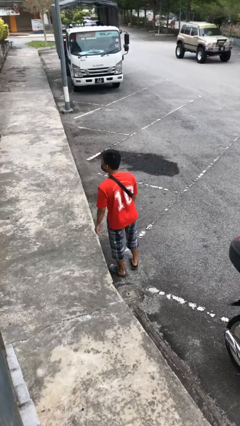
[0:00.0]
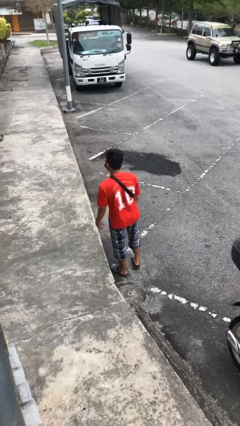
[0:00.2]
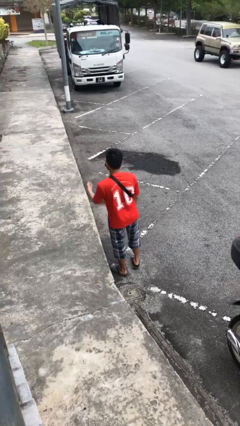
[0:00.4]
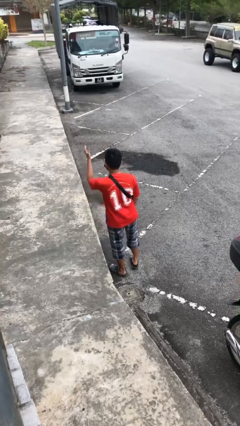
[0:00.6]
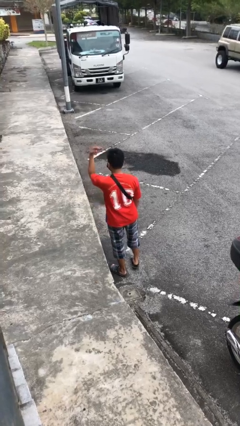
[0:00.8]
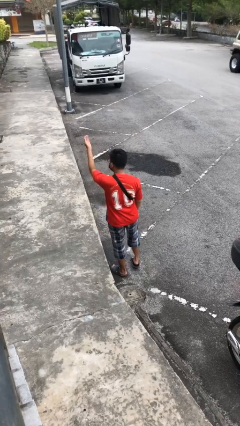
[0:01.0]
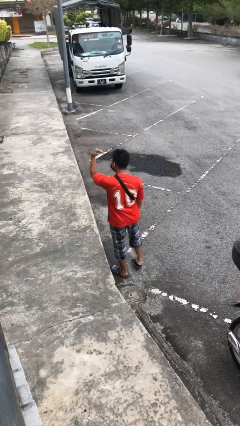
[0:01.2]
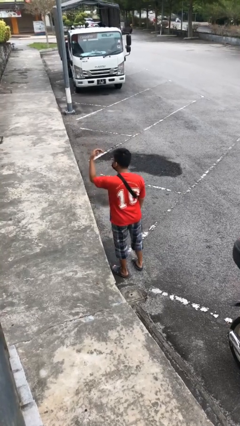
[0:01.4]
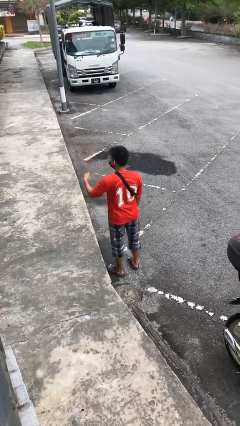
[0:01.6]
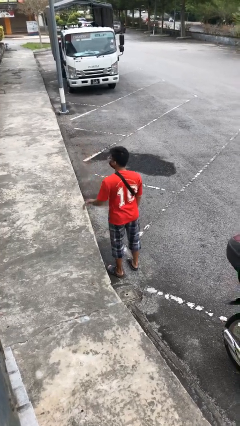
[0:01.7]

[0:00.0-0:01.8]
person gestures come here

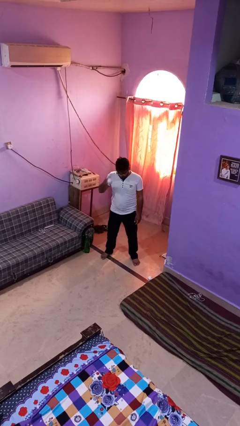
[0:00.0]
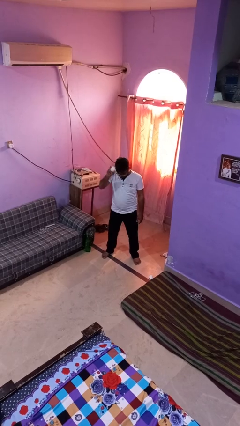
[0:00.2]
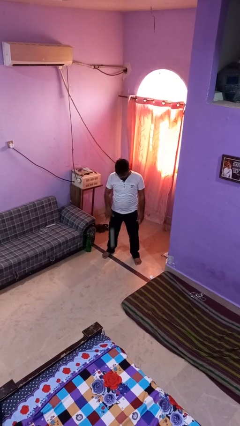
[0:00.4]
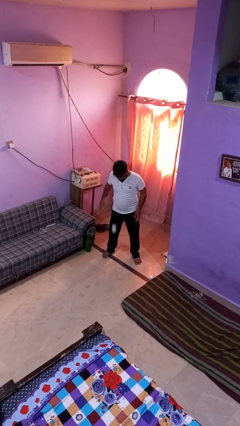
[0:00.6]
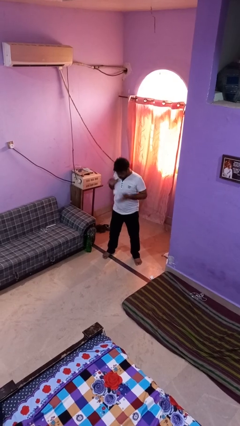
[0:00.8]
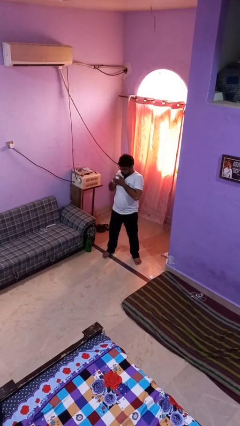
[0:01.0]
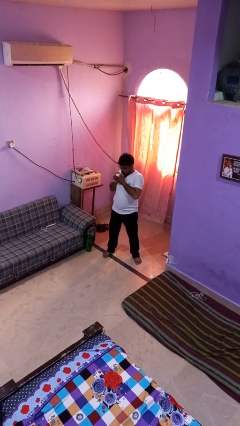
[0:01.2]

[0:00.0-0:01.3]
person bounces ball on floor

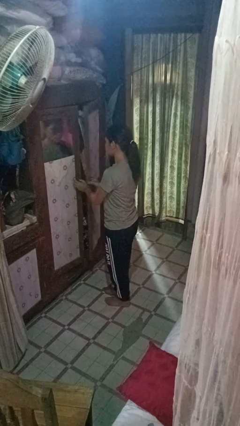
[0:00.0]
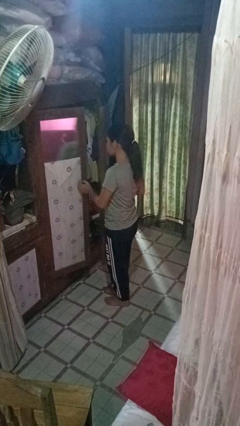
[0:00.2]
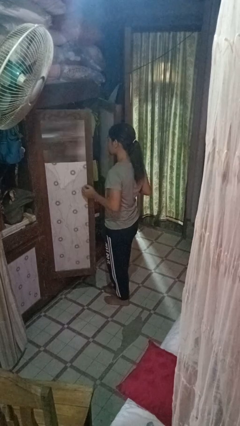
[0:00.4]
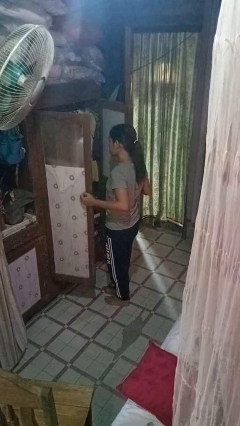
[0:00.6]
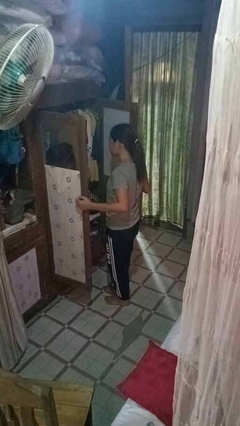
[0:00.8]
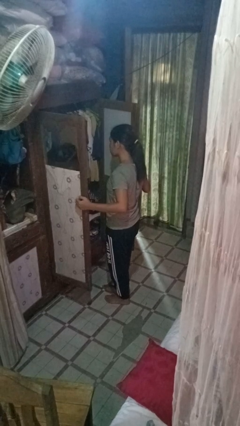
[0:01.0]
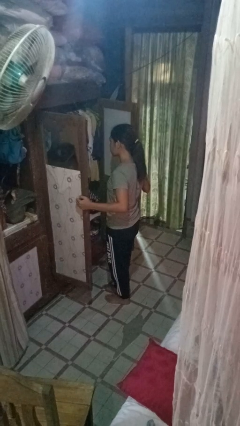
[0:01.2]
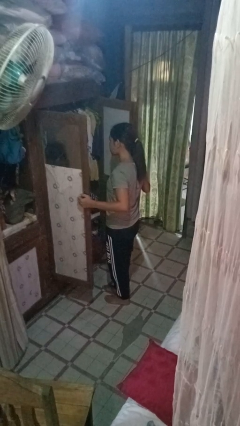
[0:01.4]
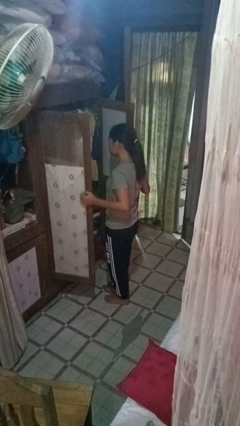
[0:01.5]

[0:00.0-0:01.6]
person opens closet door

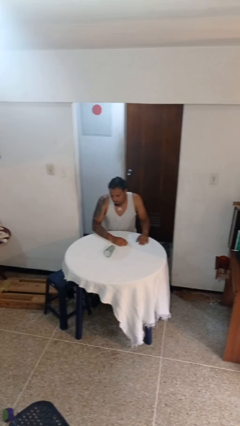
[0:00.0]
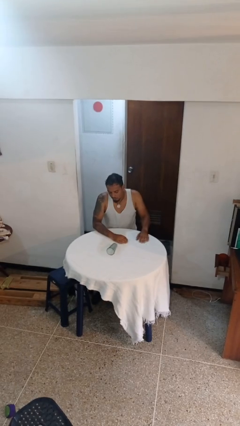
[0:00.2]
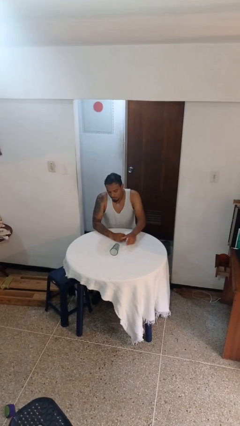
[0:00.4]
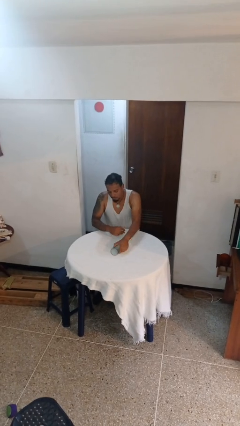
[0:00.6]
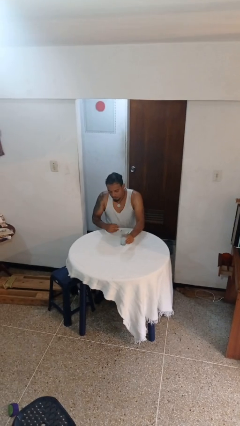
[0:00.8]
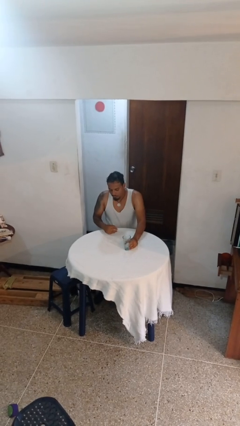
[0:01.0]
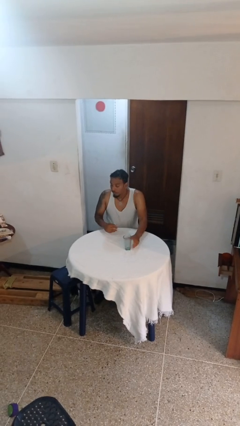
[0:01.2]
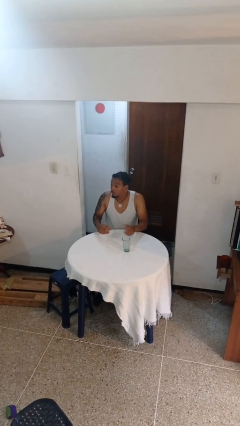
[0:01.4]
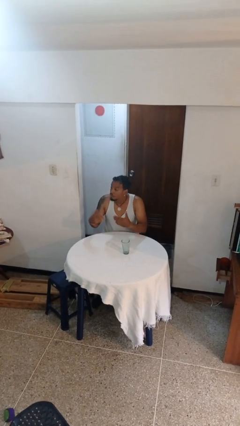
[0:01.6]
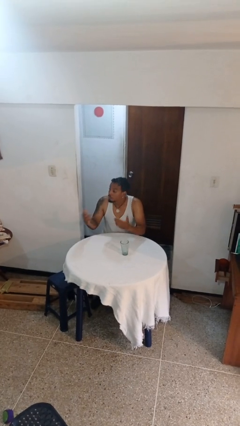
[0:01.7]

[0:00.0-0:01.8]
person sets upright glass

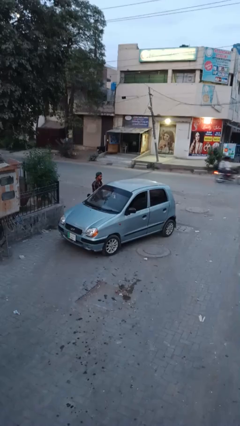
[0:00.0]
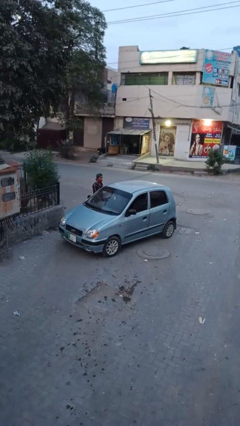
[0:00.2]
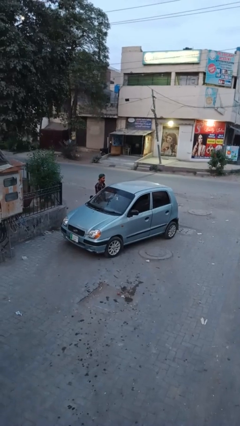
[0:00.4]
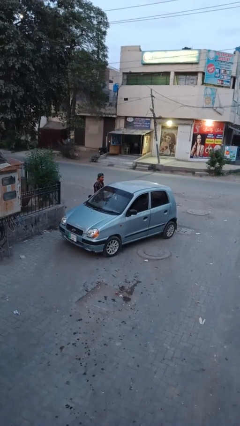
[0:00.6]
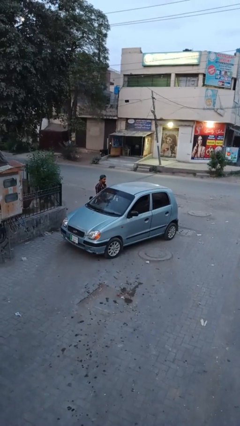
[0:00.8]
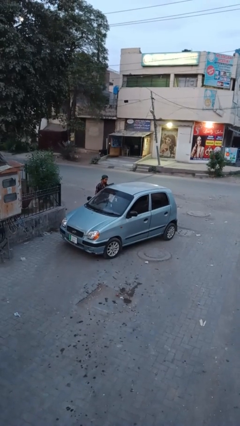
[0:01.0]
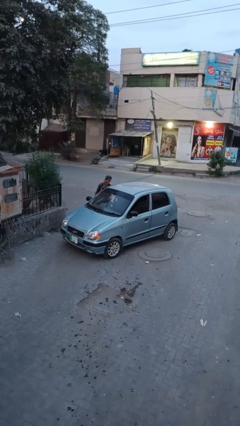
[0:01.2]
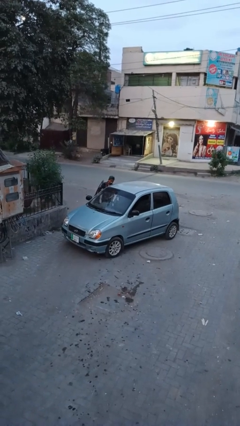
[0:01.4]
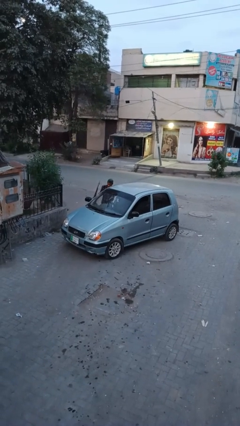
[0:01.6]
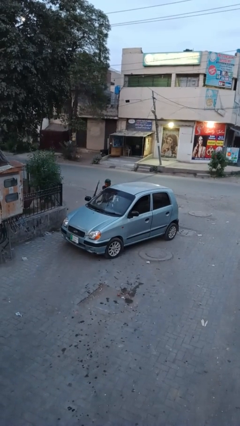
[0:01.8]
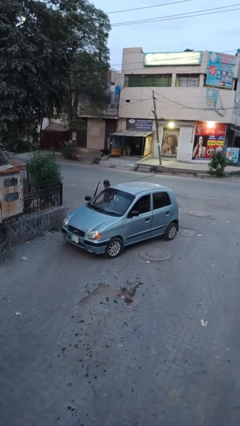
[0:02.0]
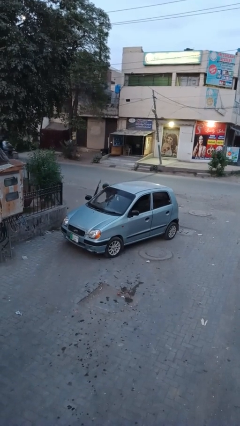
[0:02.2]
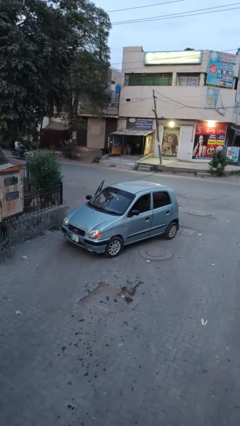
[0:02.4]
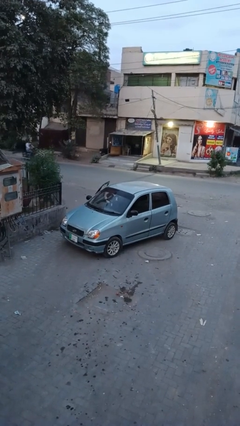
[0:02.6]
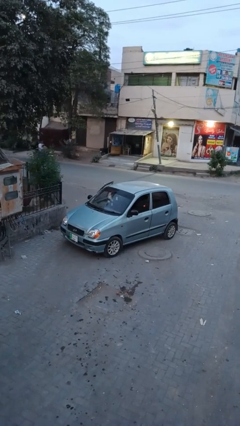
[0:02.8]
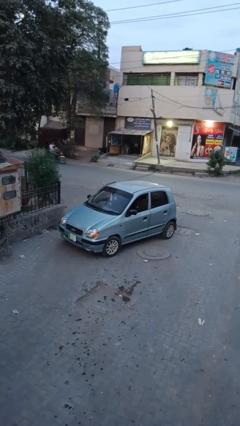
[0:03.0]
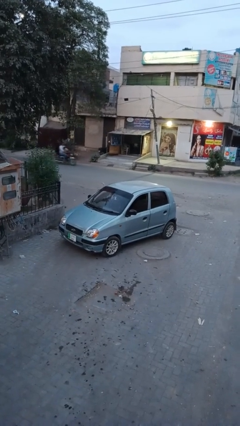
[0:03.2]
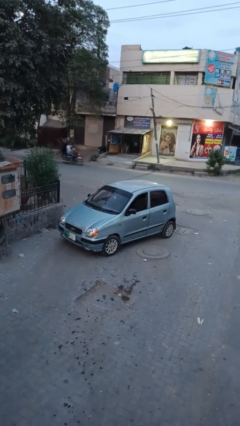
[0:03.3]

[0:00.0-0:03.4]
car picks up person

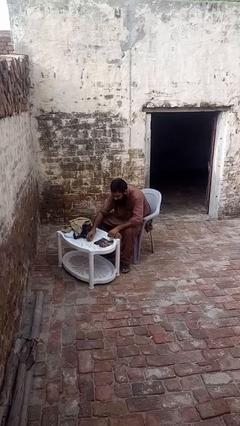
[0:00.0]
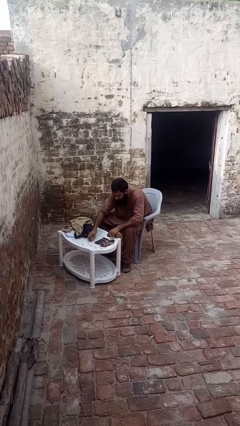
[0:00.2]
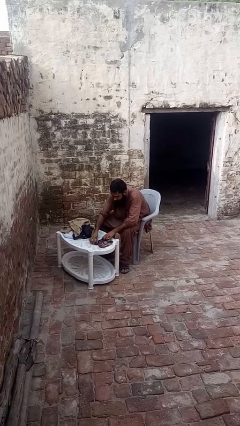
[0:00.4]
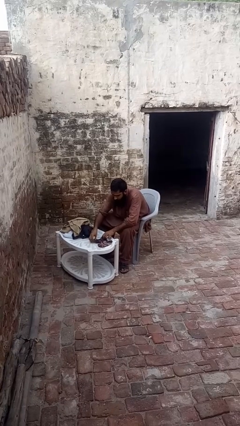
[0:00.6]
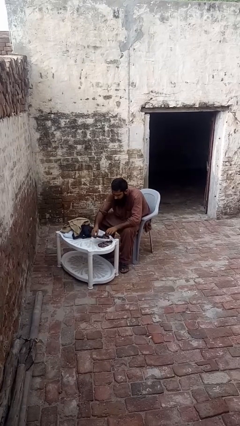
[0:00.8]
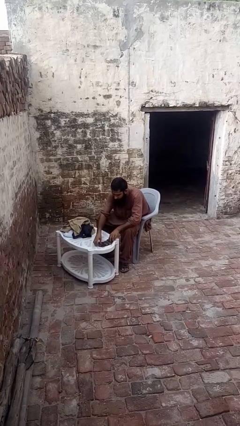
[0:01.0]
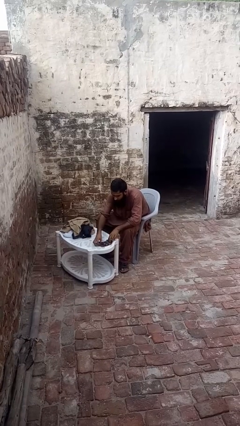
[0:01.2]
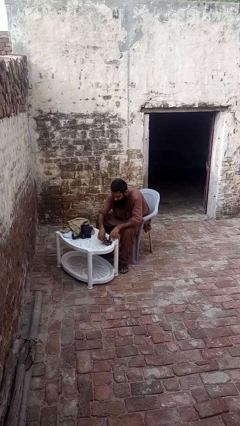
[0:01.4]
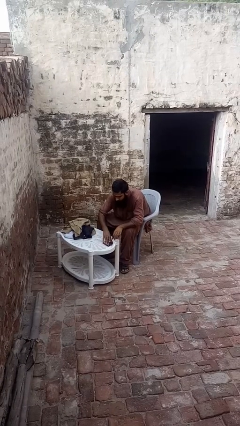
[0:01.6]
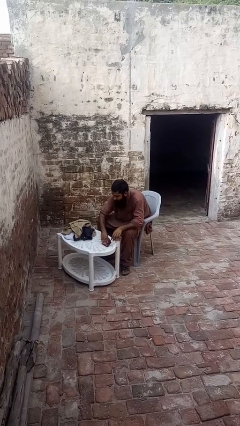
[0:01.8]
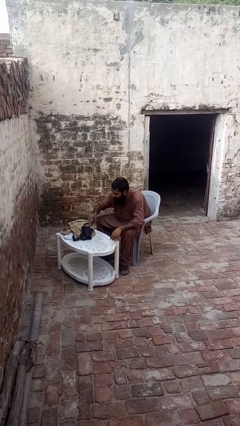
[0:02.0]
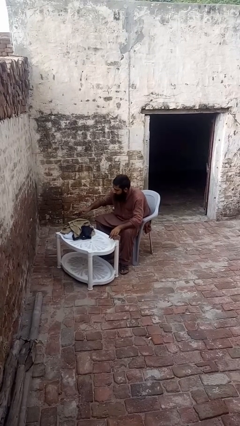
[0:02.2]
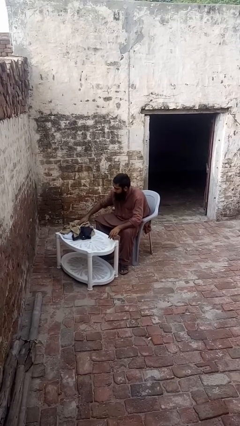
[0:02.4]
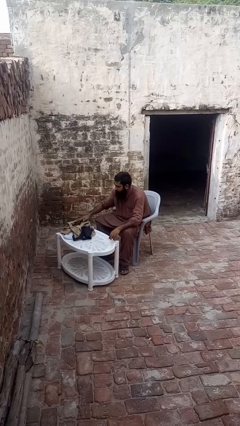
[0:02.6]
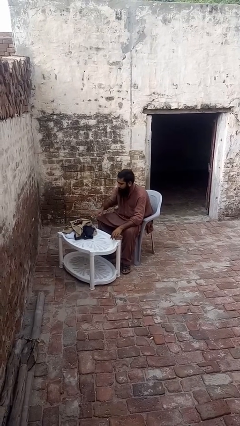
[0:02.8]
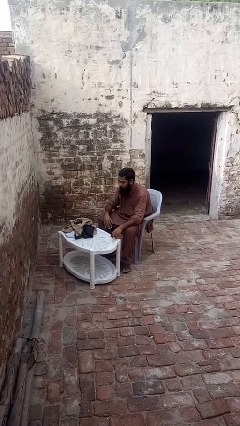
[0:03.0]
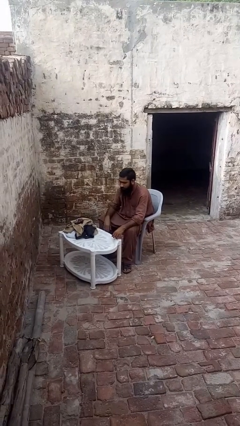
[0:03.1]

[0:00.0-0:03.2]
person folds socks

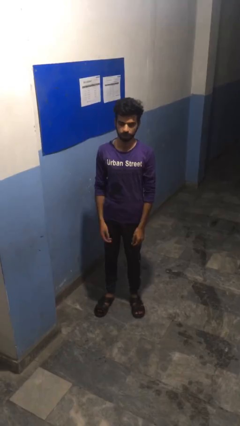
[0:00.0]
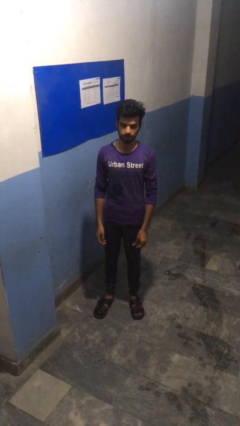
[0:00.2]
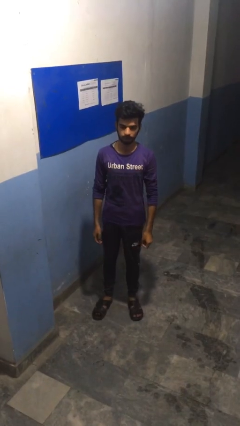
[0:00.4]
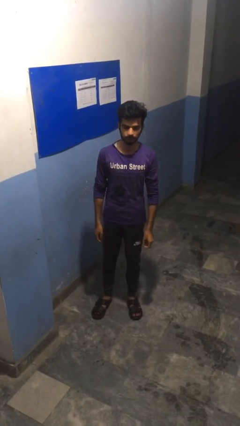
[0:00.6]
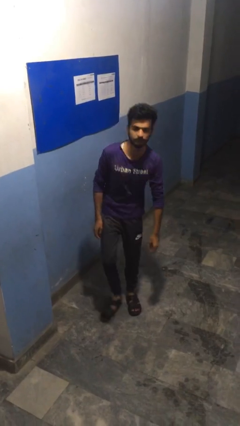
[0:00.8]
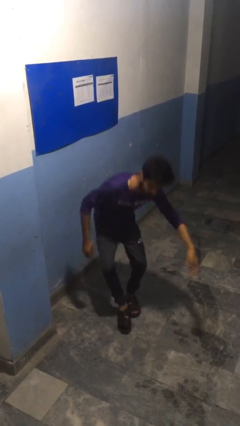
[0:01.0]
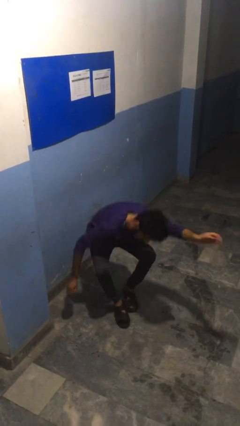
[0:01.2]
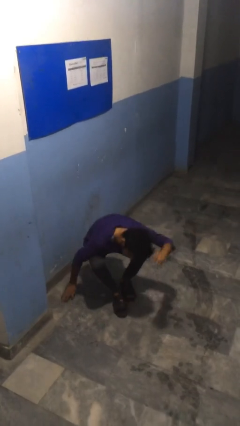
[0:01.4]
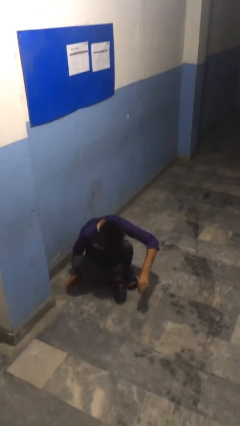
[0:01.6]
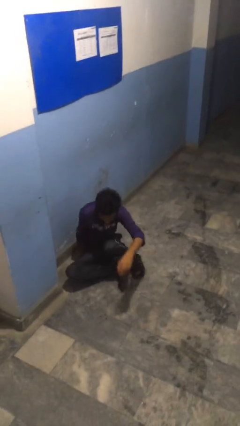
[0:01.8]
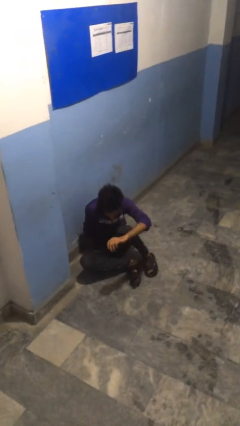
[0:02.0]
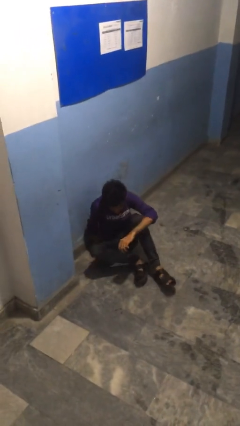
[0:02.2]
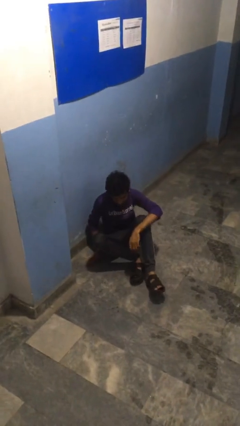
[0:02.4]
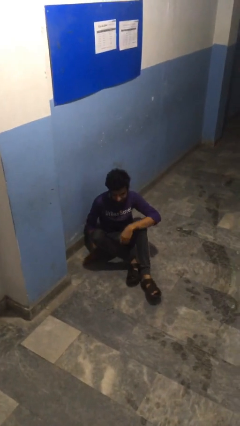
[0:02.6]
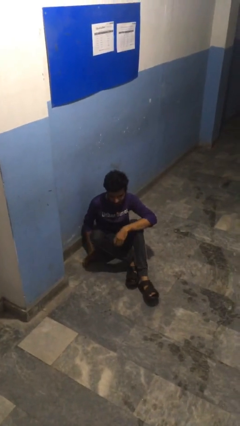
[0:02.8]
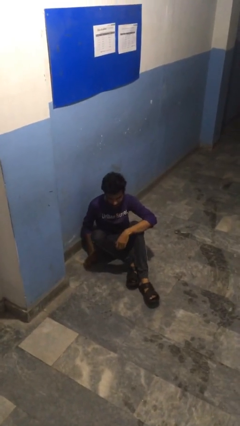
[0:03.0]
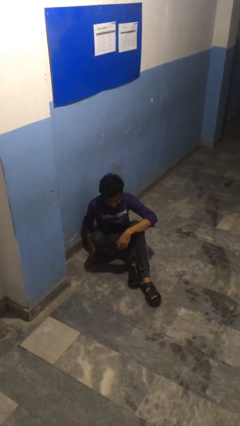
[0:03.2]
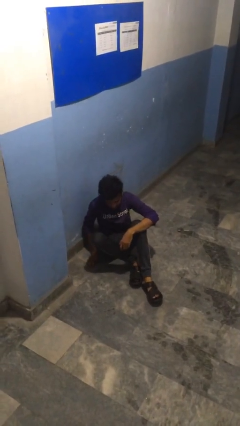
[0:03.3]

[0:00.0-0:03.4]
person falls while standing

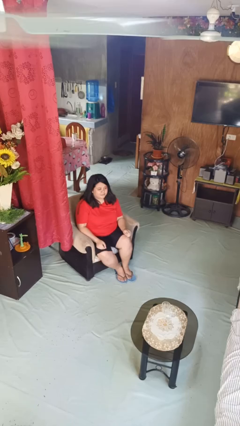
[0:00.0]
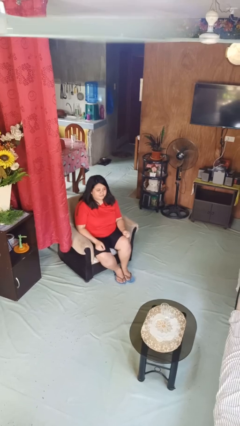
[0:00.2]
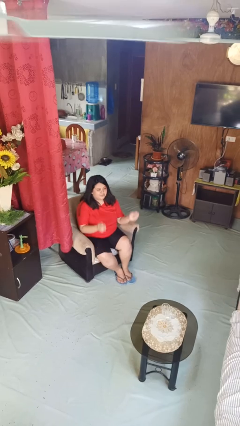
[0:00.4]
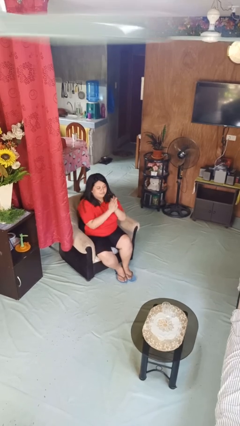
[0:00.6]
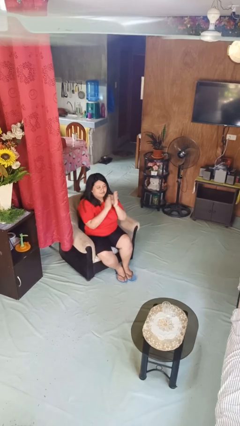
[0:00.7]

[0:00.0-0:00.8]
person claps hands
